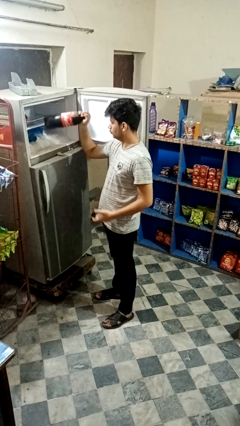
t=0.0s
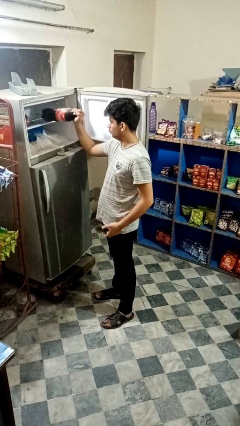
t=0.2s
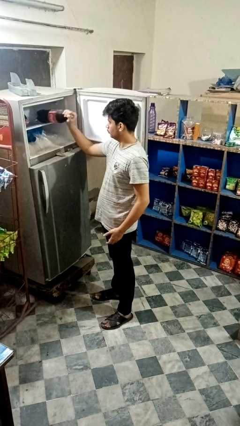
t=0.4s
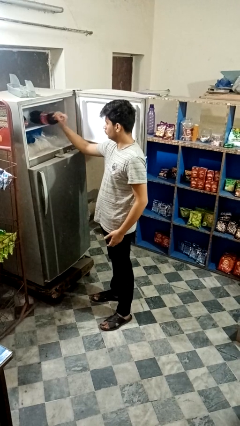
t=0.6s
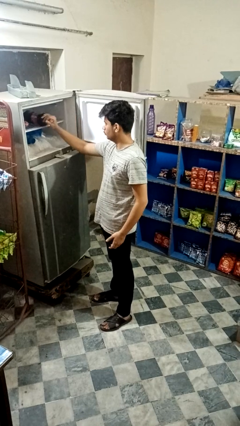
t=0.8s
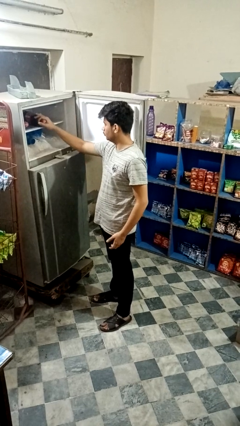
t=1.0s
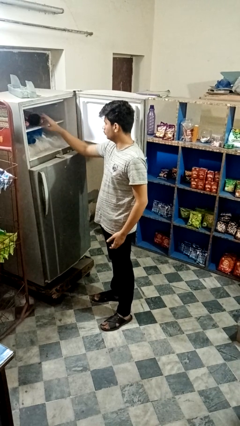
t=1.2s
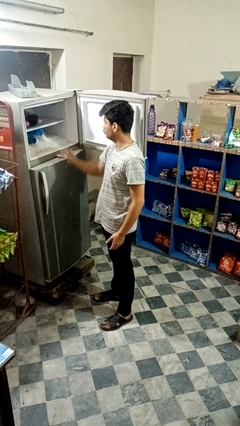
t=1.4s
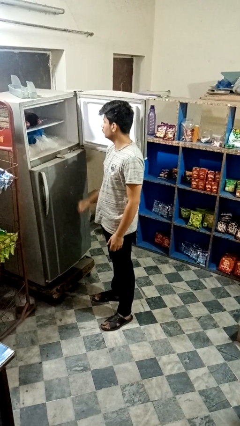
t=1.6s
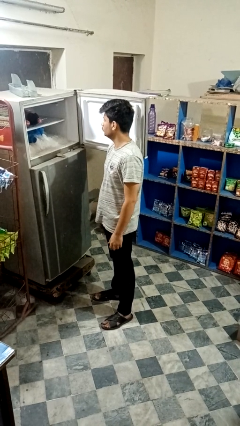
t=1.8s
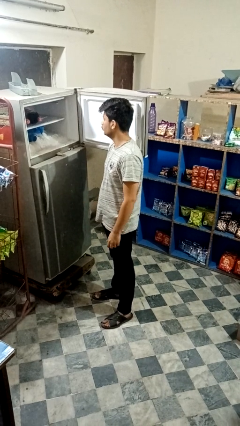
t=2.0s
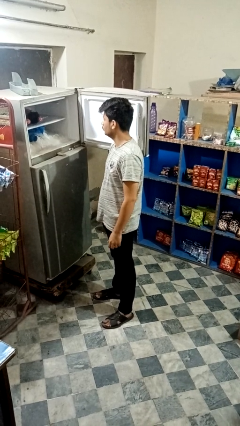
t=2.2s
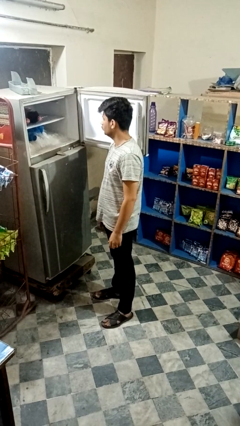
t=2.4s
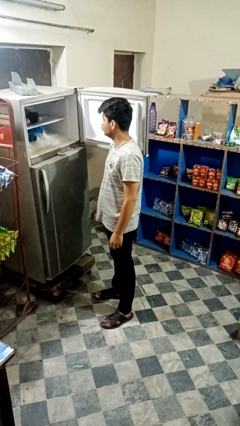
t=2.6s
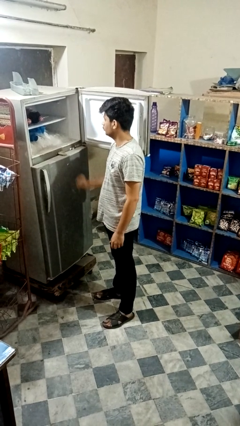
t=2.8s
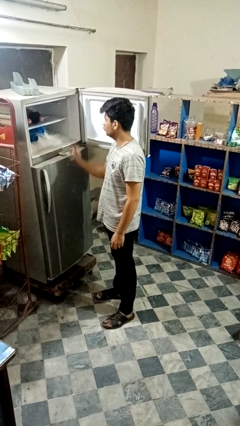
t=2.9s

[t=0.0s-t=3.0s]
person puts object into refrigerator

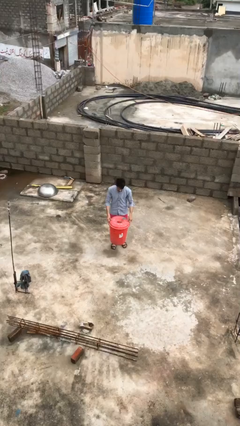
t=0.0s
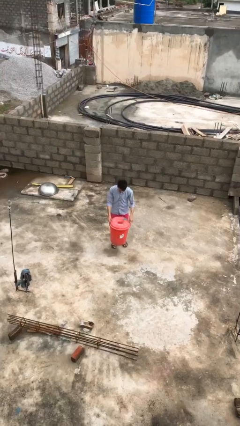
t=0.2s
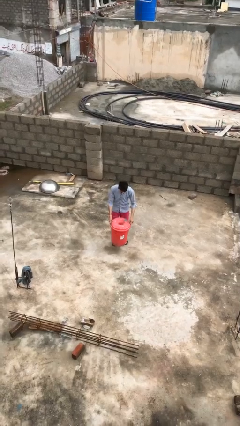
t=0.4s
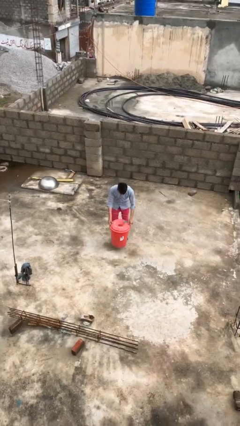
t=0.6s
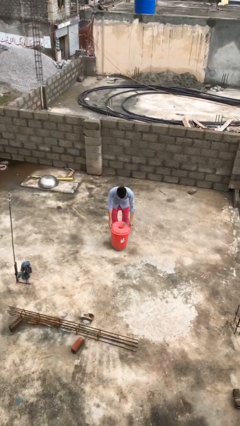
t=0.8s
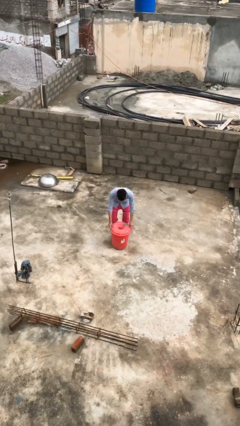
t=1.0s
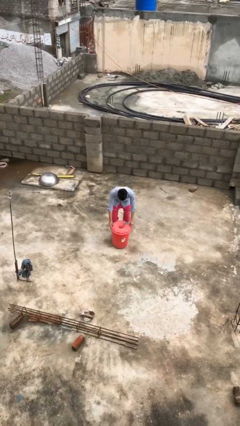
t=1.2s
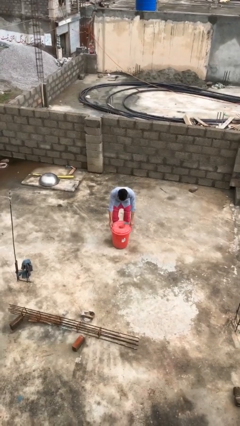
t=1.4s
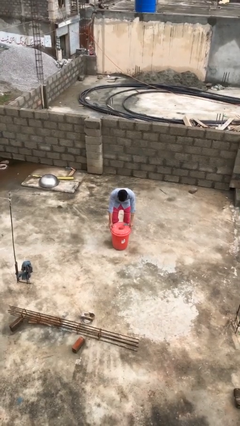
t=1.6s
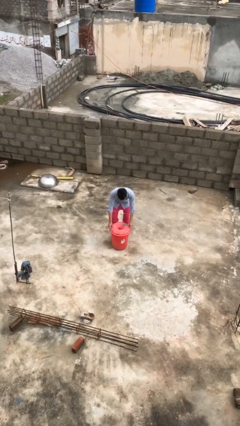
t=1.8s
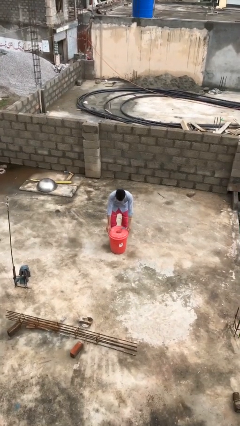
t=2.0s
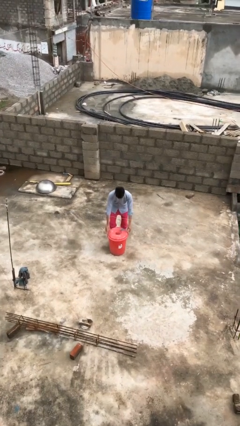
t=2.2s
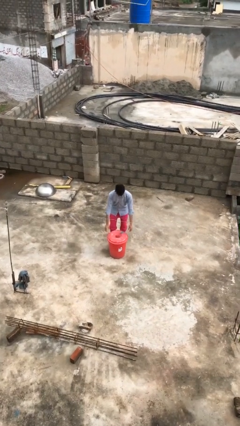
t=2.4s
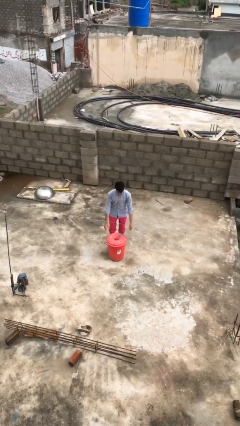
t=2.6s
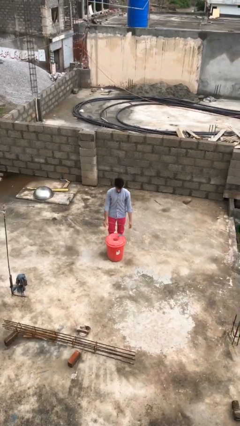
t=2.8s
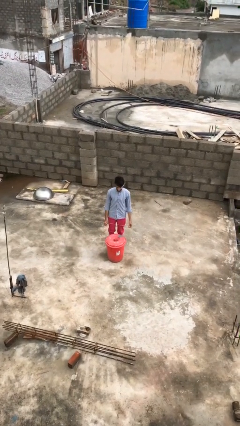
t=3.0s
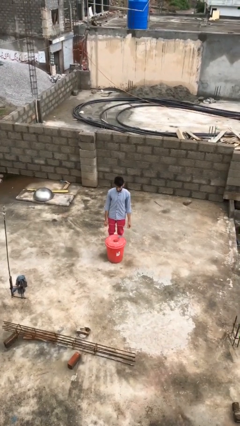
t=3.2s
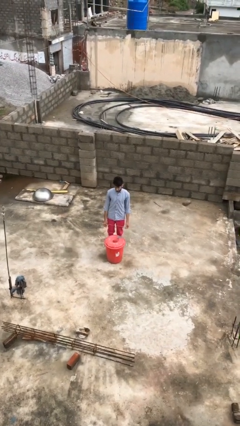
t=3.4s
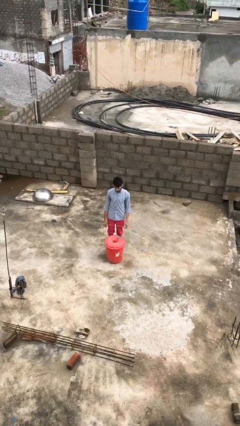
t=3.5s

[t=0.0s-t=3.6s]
person puts down object on floor

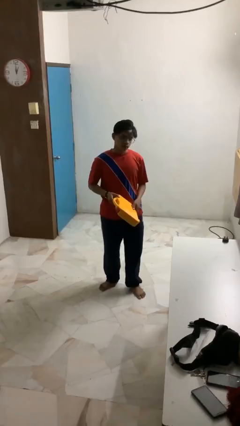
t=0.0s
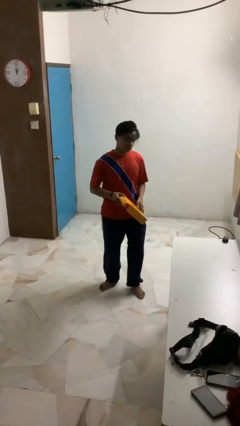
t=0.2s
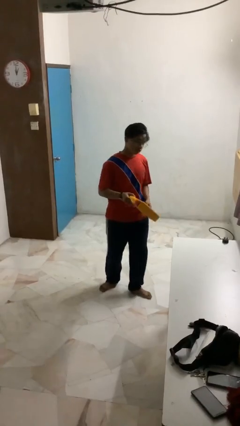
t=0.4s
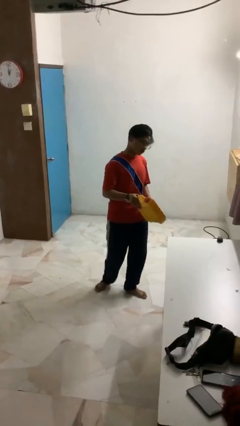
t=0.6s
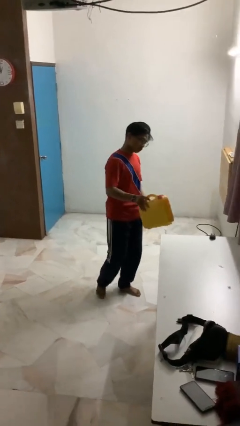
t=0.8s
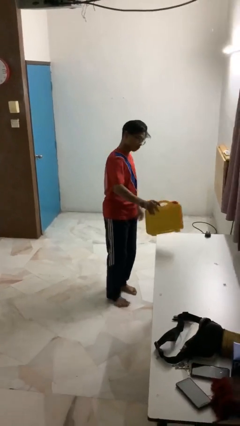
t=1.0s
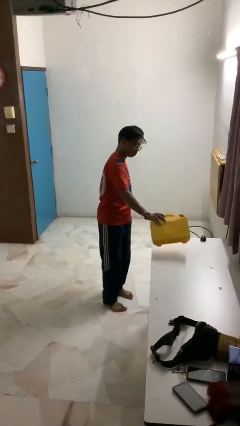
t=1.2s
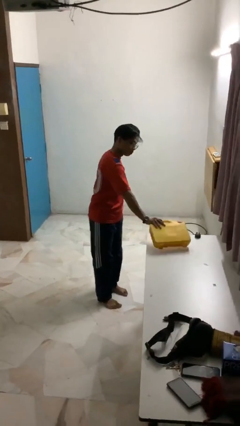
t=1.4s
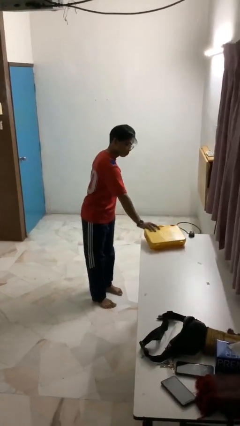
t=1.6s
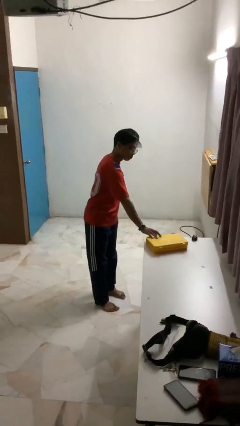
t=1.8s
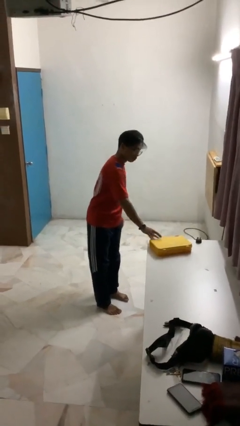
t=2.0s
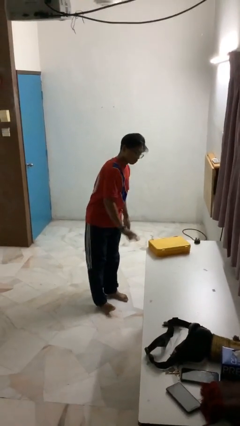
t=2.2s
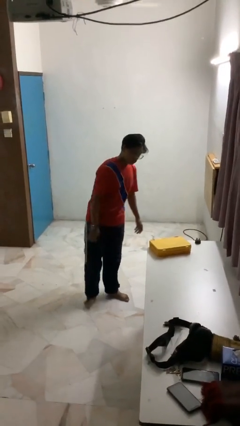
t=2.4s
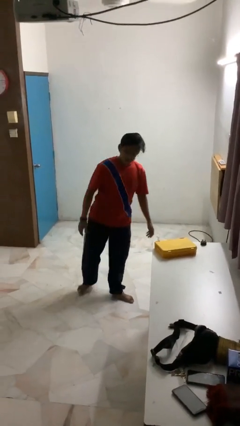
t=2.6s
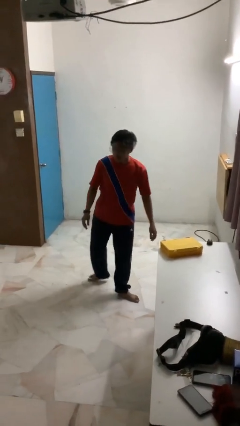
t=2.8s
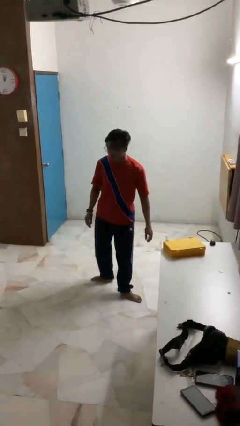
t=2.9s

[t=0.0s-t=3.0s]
person puts down object on table

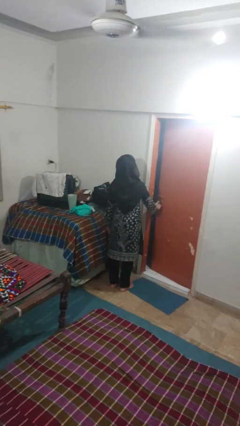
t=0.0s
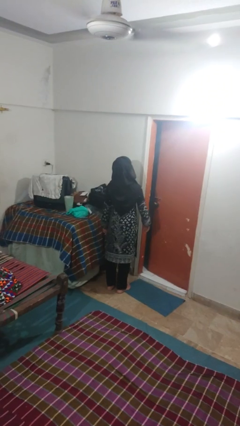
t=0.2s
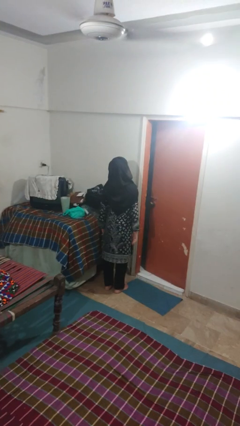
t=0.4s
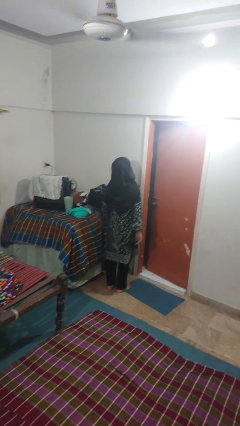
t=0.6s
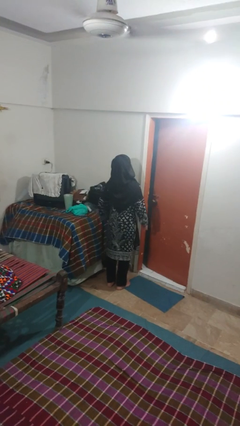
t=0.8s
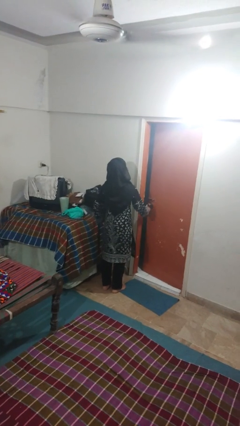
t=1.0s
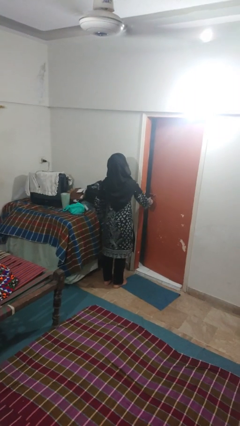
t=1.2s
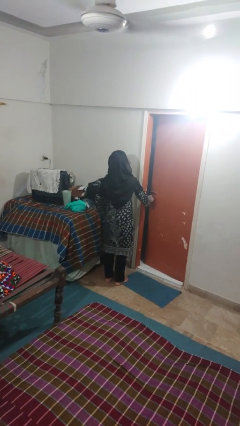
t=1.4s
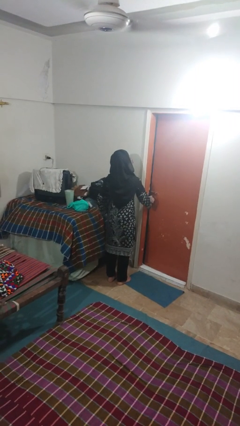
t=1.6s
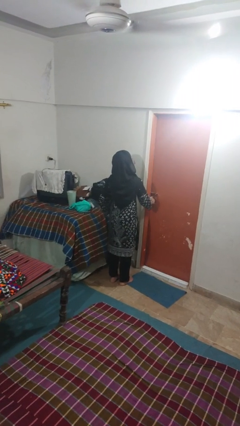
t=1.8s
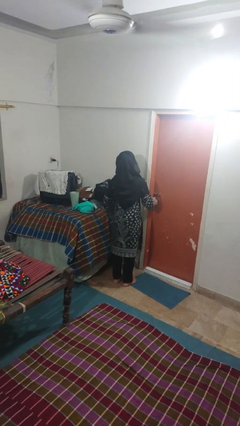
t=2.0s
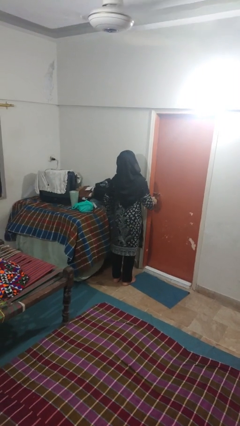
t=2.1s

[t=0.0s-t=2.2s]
person closes facility door

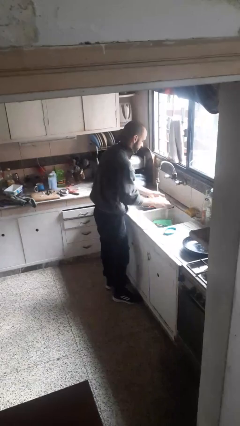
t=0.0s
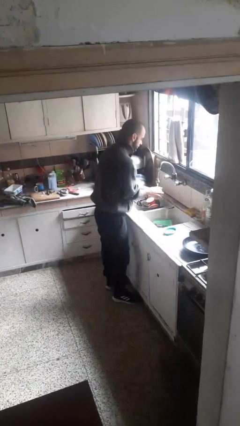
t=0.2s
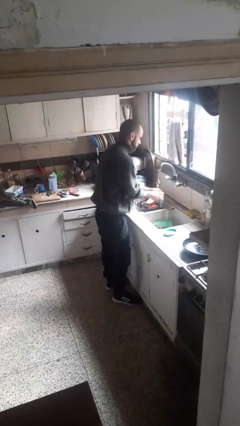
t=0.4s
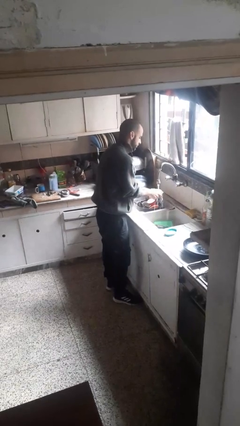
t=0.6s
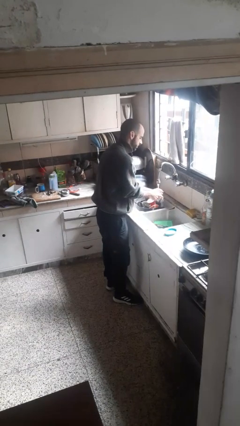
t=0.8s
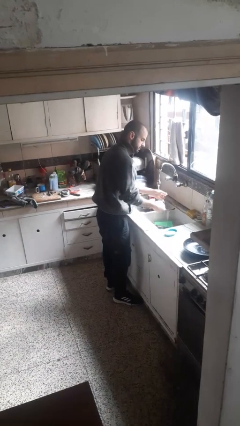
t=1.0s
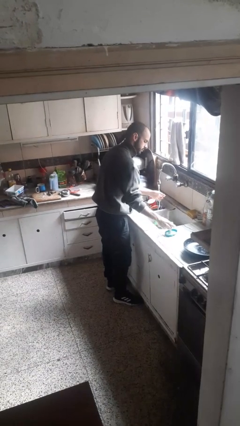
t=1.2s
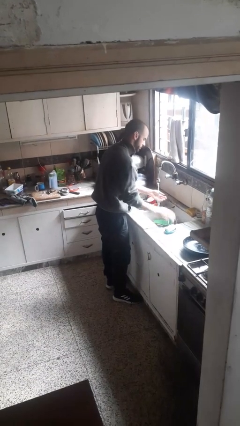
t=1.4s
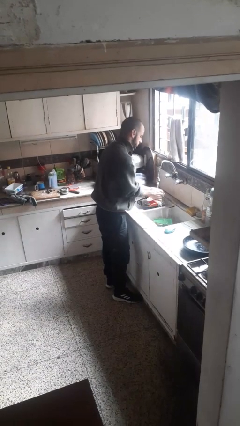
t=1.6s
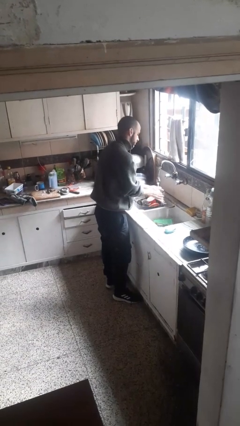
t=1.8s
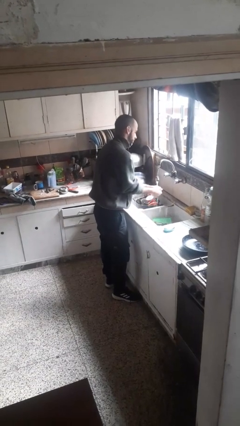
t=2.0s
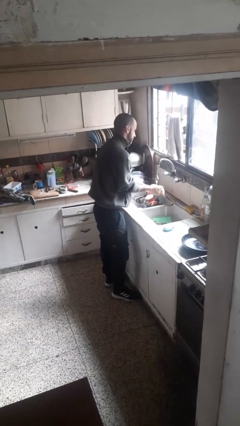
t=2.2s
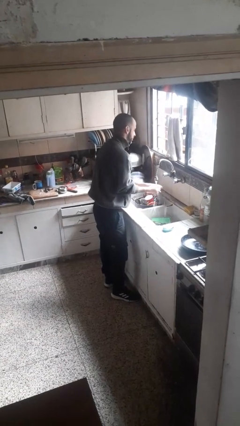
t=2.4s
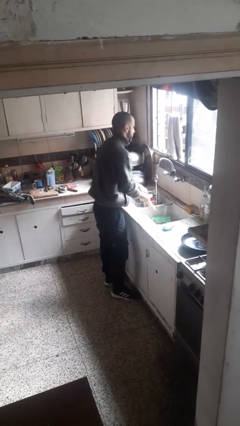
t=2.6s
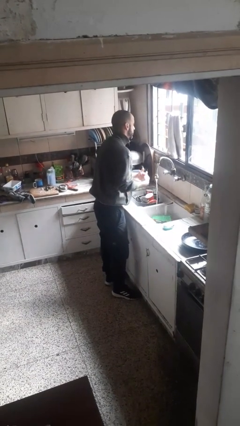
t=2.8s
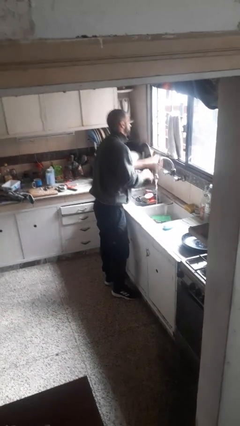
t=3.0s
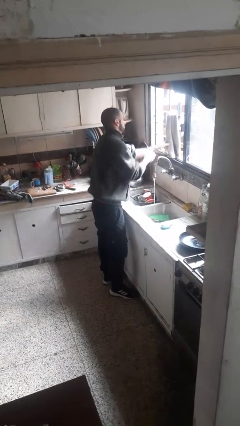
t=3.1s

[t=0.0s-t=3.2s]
person washes hands

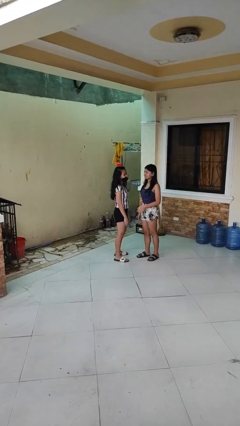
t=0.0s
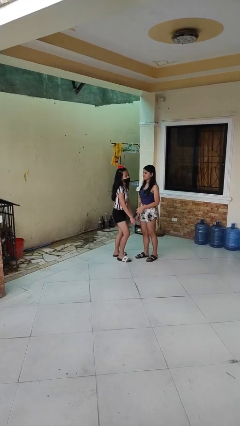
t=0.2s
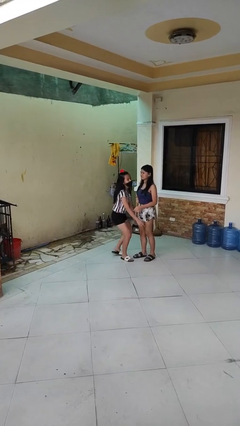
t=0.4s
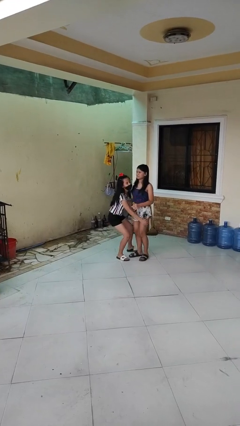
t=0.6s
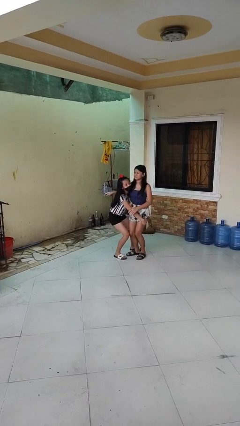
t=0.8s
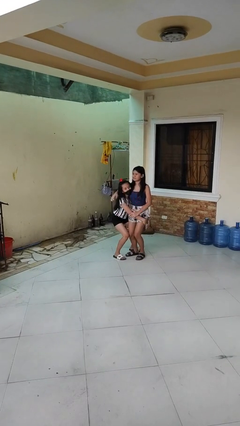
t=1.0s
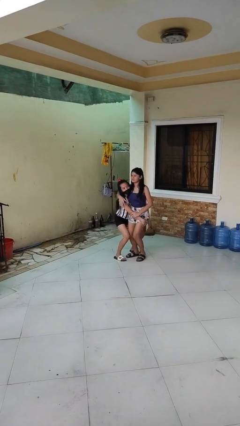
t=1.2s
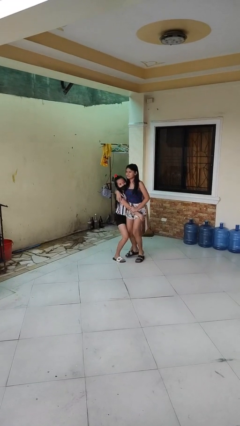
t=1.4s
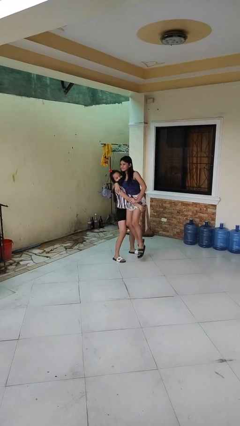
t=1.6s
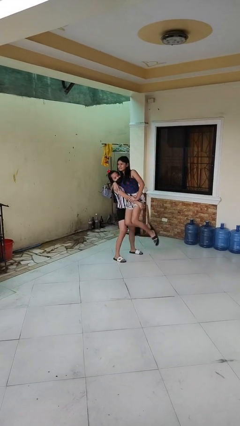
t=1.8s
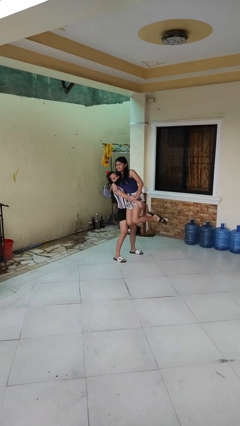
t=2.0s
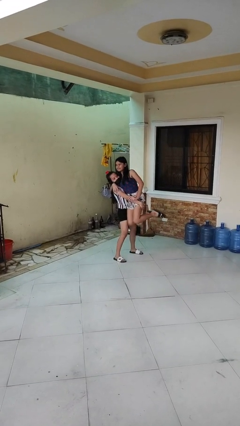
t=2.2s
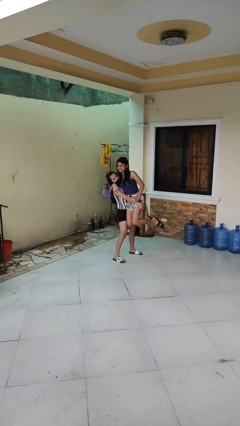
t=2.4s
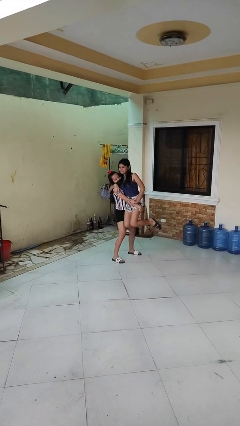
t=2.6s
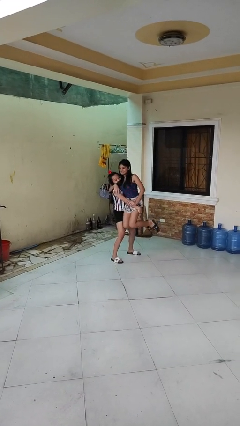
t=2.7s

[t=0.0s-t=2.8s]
person picks up person
